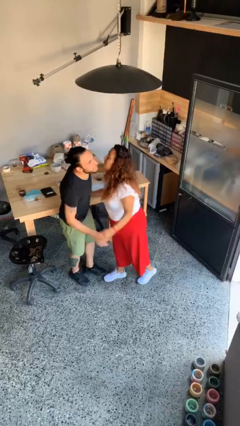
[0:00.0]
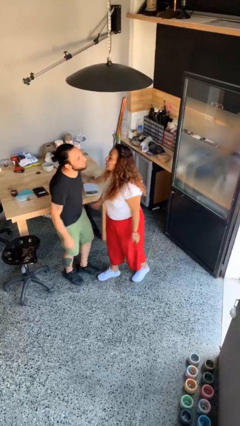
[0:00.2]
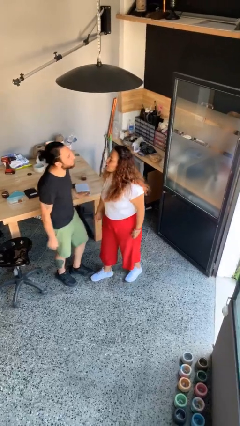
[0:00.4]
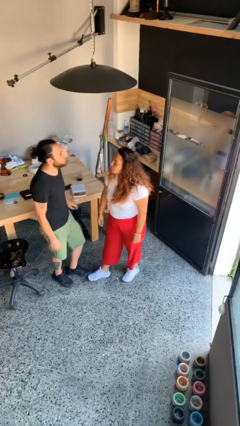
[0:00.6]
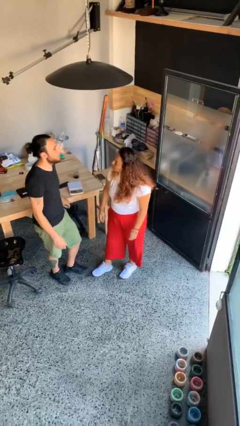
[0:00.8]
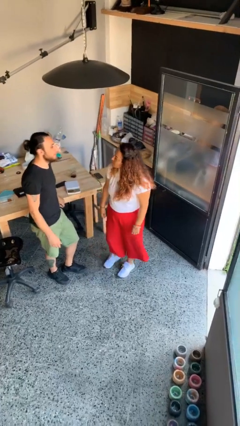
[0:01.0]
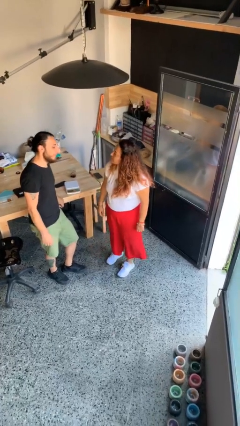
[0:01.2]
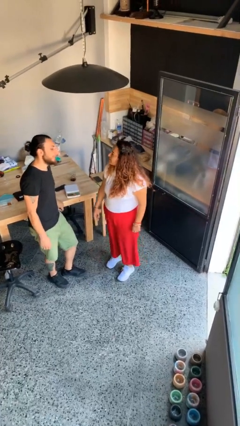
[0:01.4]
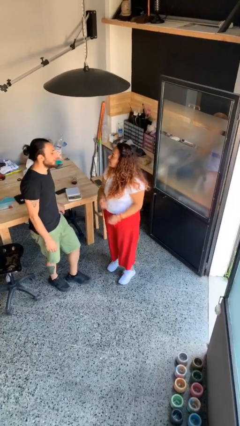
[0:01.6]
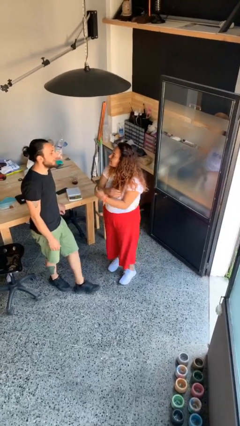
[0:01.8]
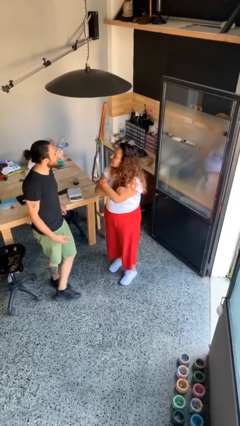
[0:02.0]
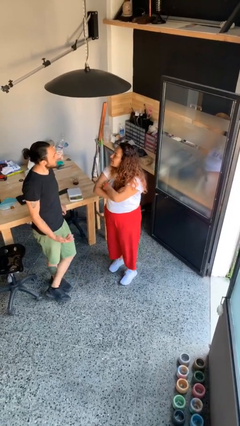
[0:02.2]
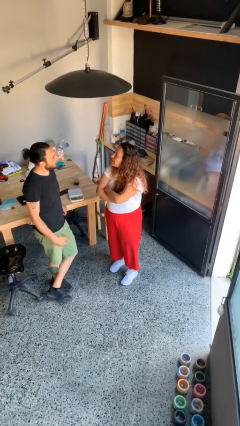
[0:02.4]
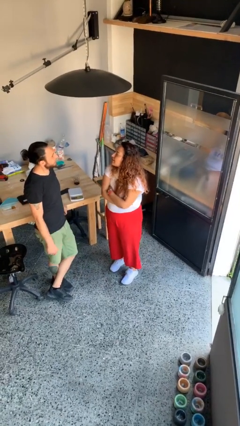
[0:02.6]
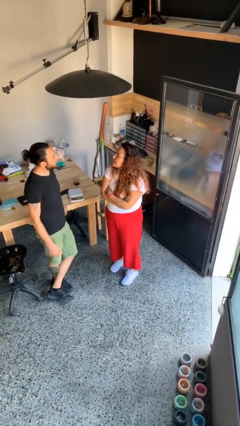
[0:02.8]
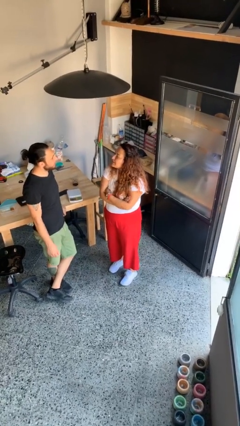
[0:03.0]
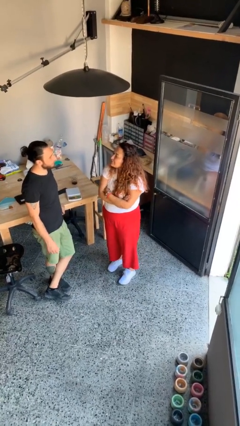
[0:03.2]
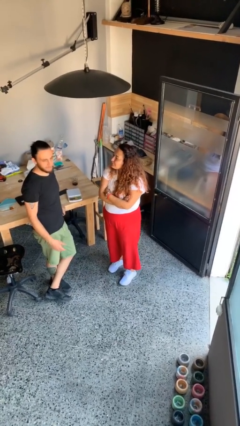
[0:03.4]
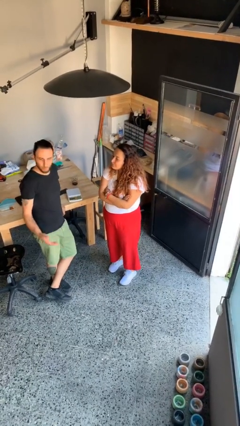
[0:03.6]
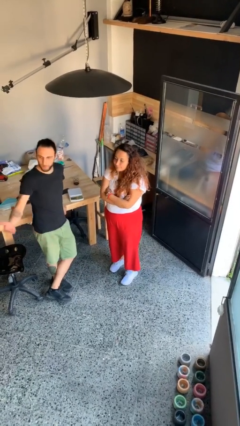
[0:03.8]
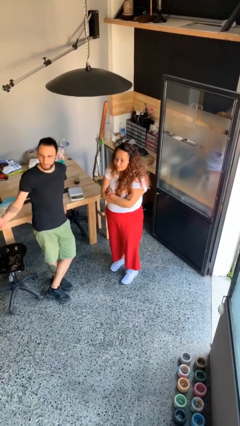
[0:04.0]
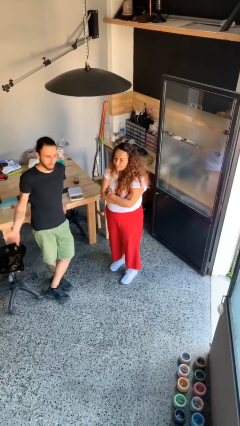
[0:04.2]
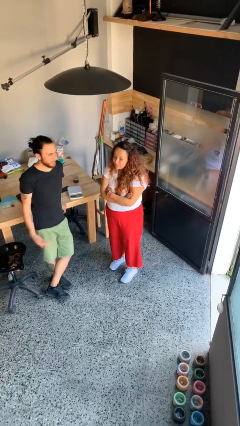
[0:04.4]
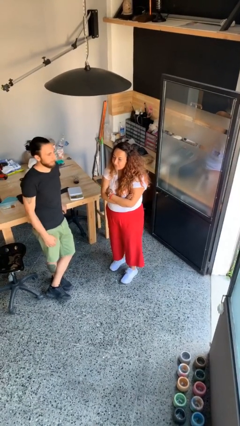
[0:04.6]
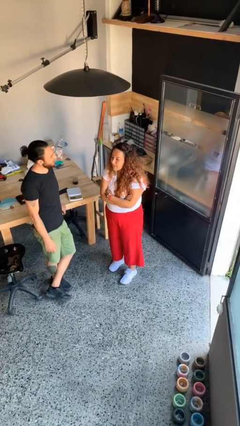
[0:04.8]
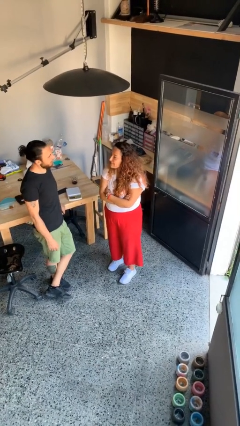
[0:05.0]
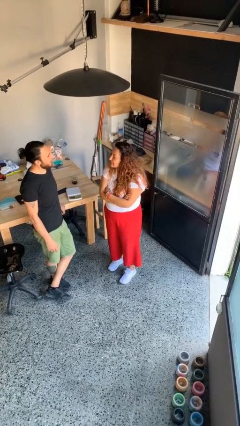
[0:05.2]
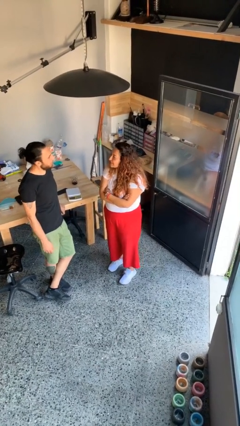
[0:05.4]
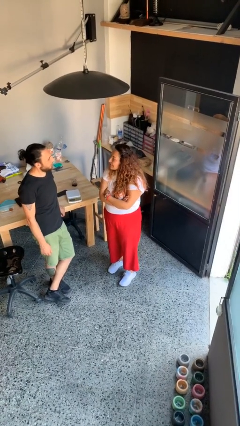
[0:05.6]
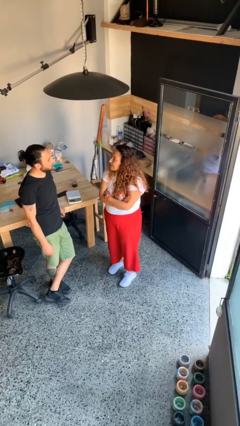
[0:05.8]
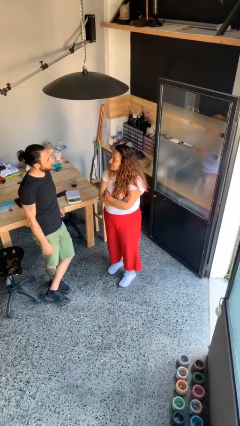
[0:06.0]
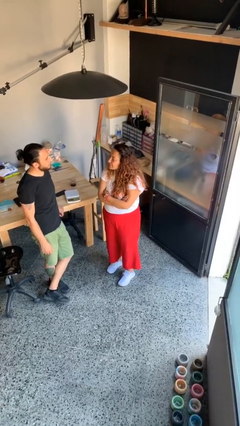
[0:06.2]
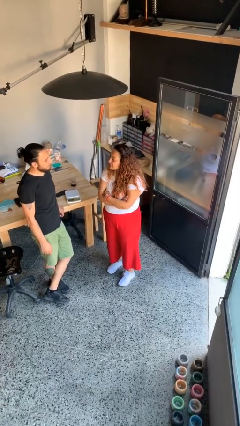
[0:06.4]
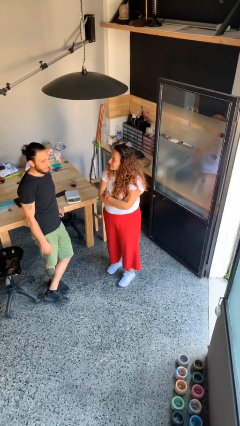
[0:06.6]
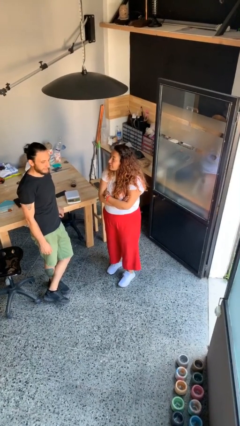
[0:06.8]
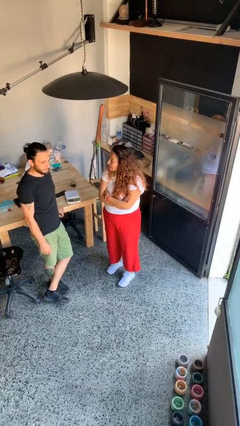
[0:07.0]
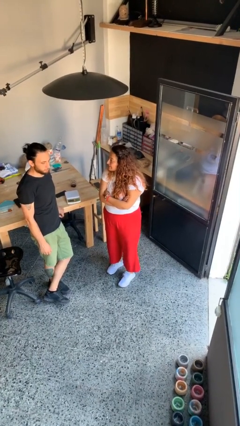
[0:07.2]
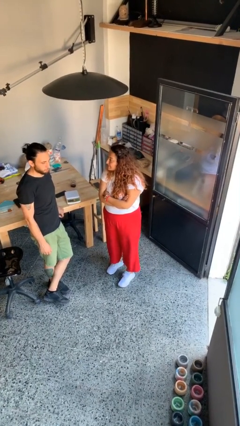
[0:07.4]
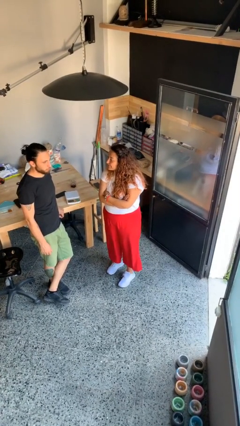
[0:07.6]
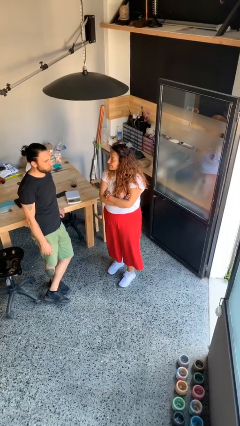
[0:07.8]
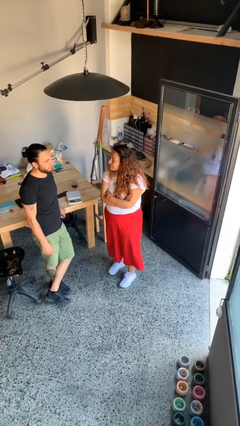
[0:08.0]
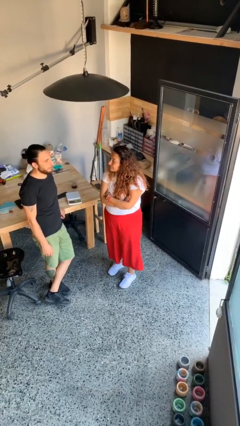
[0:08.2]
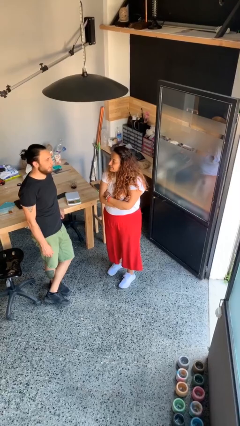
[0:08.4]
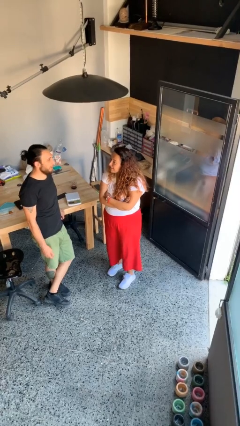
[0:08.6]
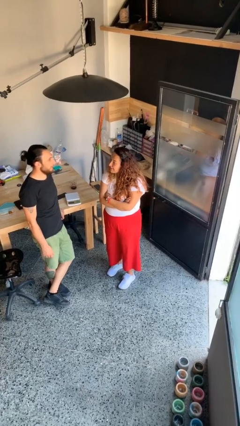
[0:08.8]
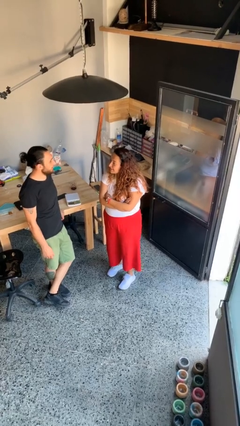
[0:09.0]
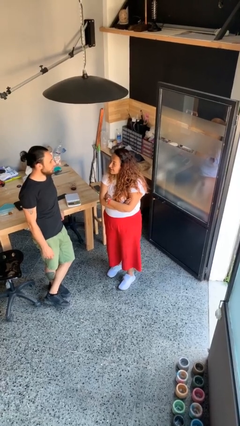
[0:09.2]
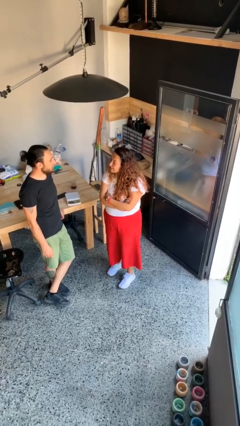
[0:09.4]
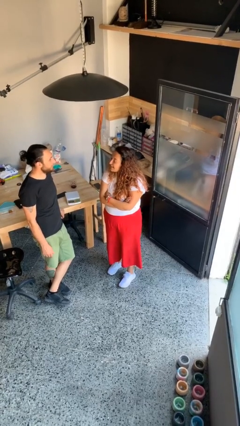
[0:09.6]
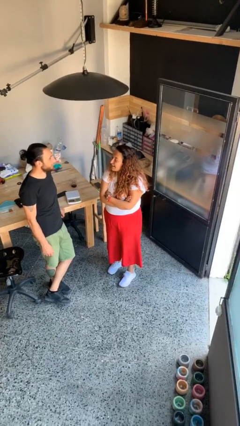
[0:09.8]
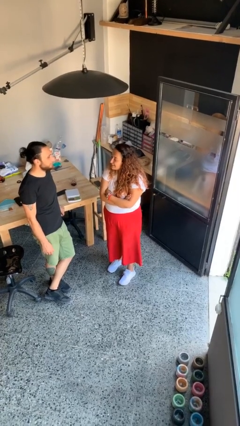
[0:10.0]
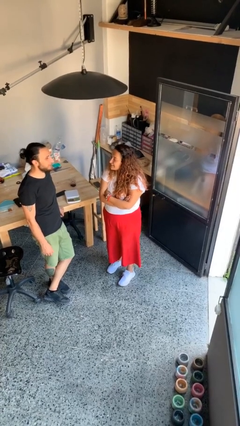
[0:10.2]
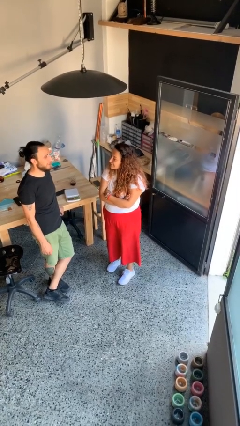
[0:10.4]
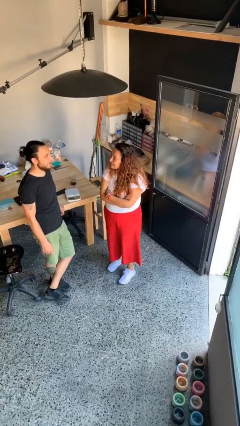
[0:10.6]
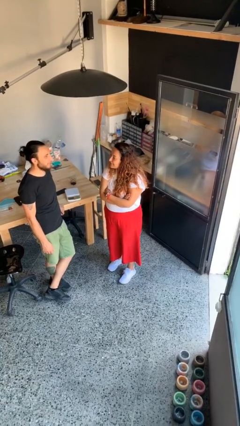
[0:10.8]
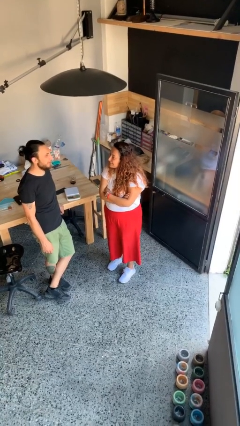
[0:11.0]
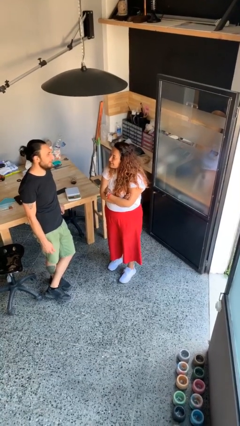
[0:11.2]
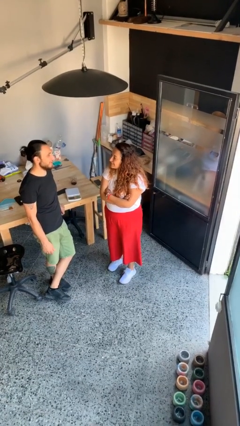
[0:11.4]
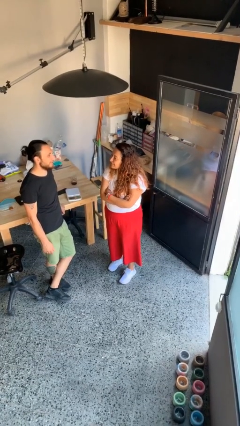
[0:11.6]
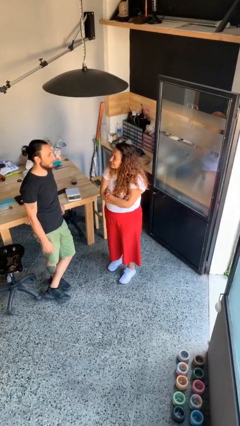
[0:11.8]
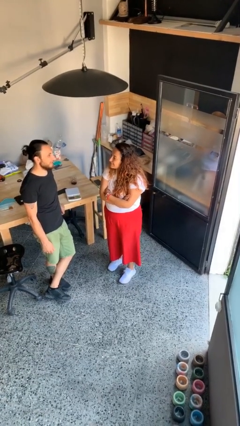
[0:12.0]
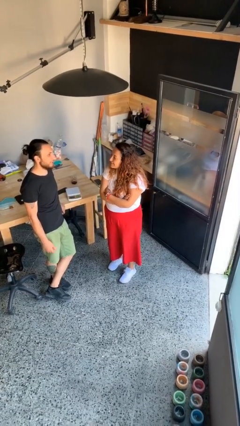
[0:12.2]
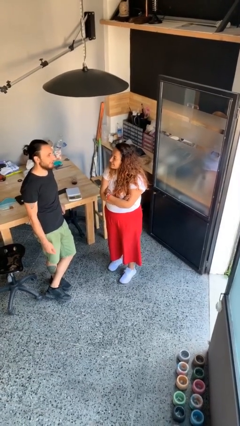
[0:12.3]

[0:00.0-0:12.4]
person talks to person

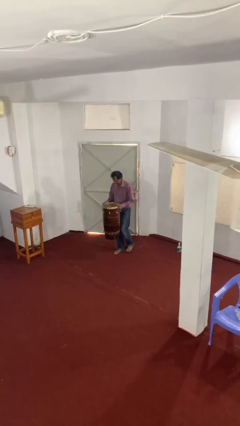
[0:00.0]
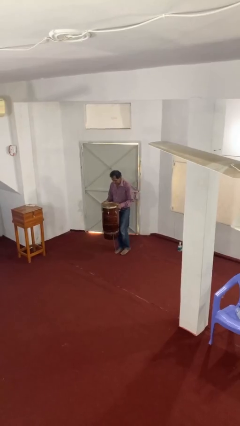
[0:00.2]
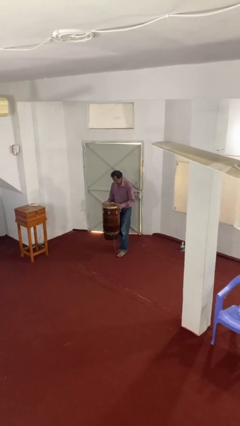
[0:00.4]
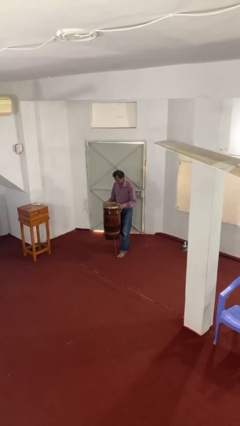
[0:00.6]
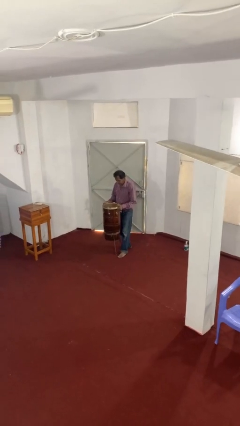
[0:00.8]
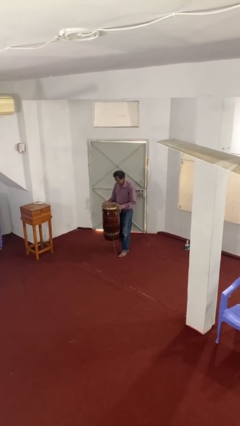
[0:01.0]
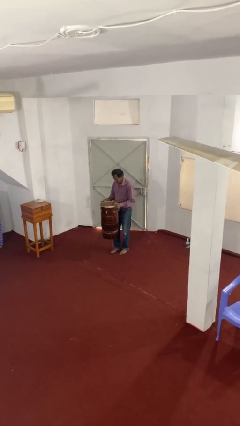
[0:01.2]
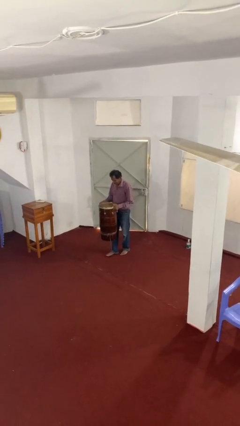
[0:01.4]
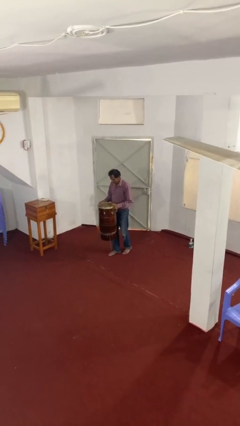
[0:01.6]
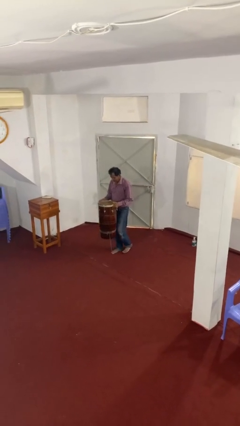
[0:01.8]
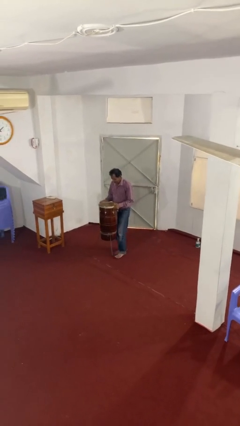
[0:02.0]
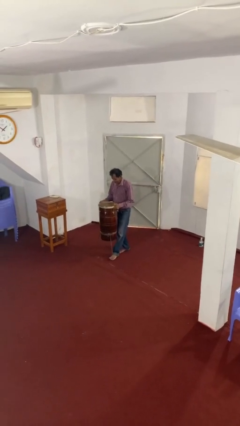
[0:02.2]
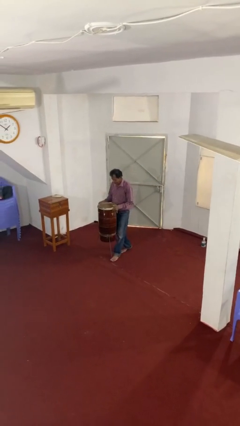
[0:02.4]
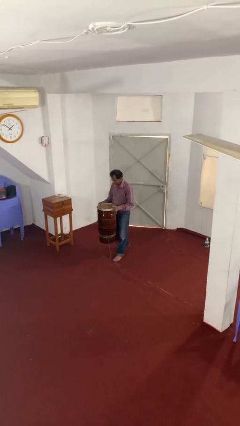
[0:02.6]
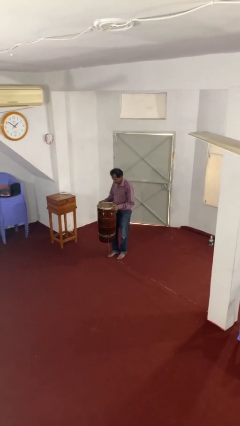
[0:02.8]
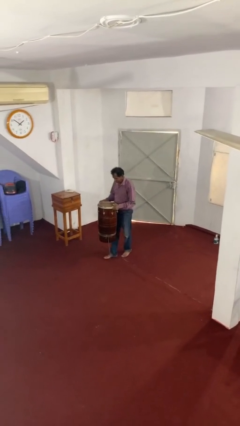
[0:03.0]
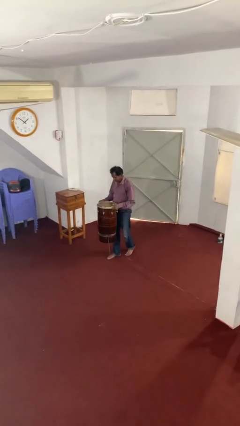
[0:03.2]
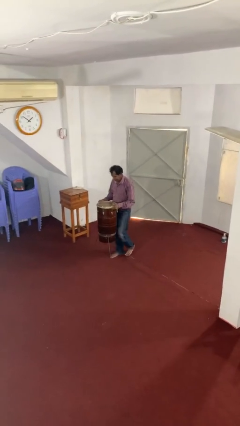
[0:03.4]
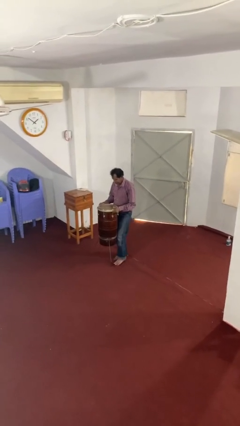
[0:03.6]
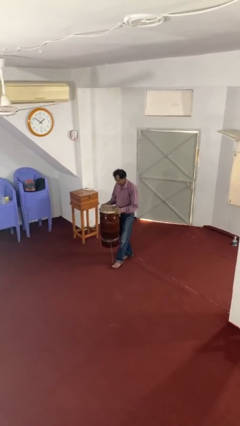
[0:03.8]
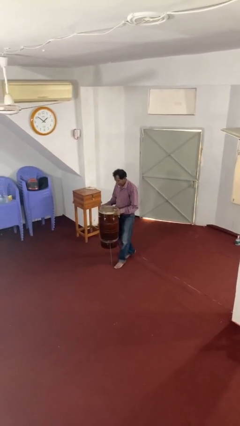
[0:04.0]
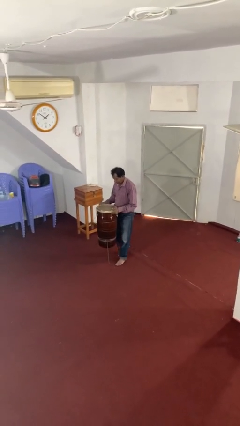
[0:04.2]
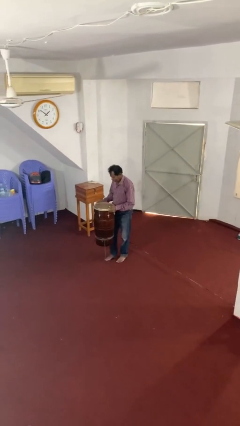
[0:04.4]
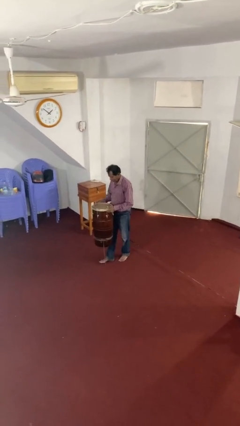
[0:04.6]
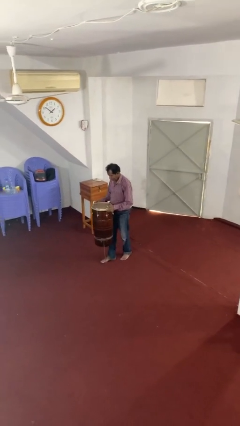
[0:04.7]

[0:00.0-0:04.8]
person carries heavy object

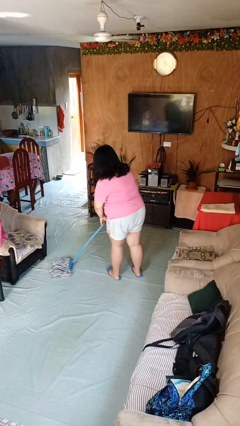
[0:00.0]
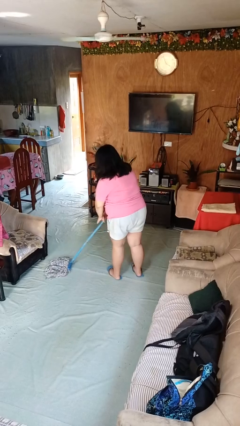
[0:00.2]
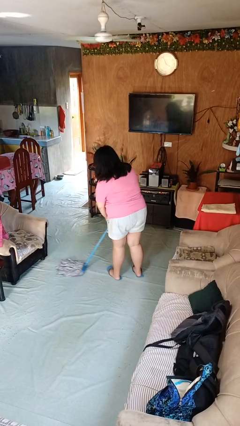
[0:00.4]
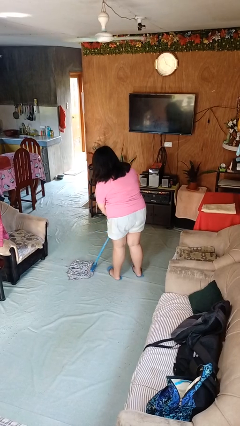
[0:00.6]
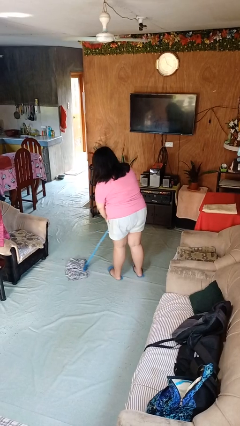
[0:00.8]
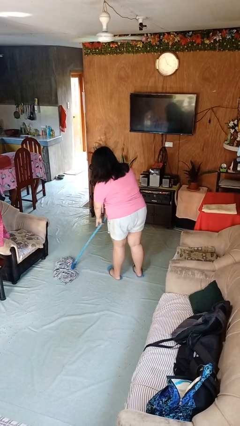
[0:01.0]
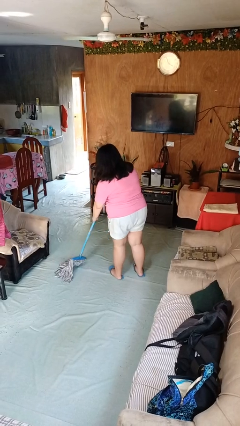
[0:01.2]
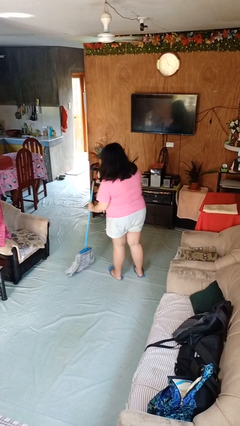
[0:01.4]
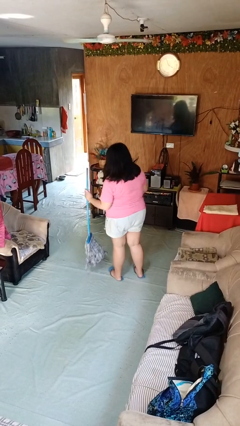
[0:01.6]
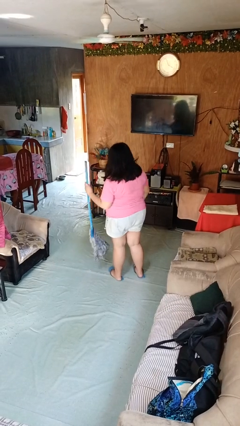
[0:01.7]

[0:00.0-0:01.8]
person mops
